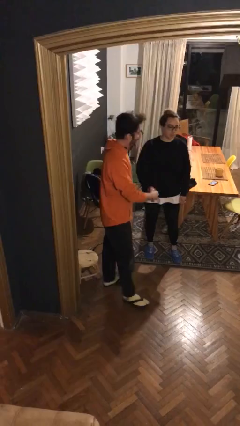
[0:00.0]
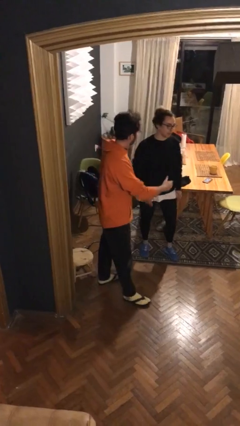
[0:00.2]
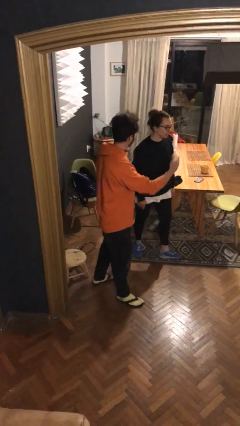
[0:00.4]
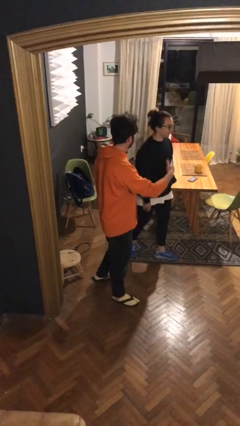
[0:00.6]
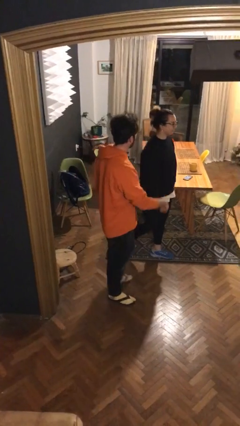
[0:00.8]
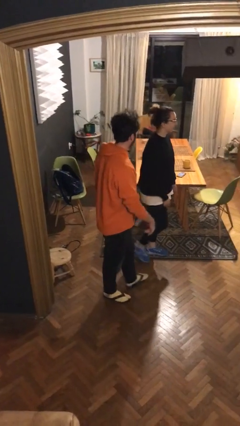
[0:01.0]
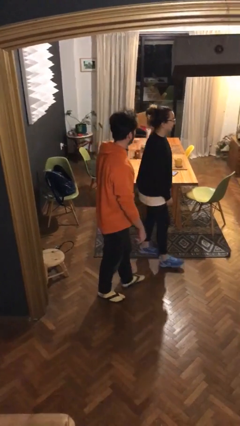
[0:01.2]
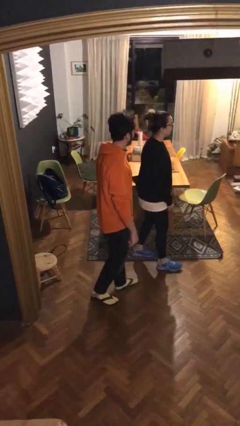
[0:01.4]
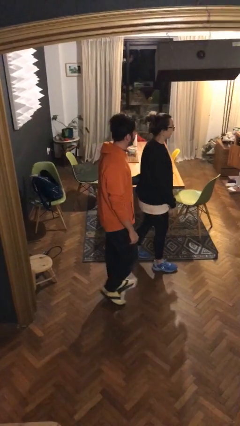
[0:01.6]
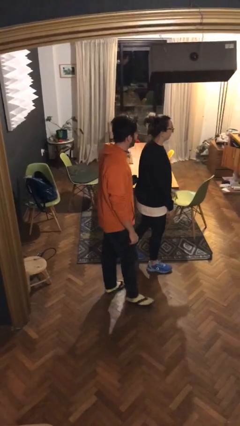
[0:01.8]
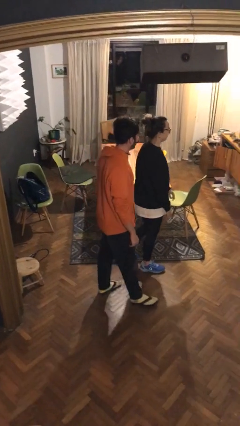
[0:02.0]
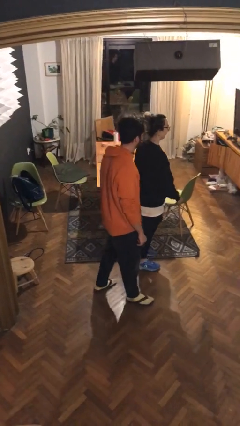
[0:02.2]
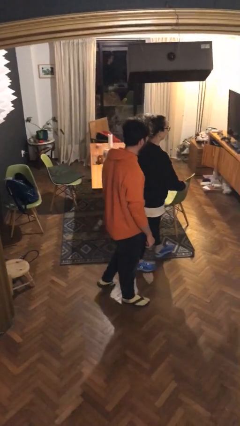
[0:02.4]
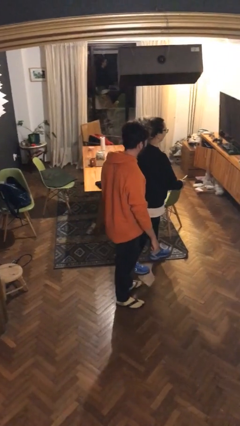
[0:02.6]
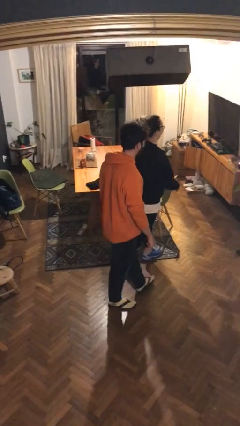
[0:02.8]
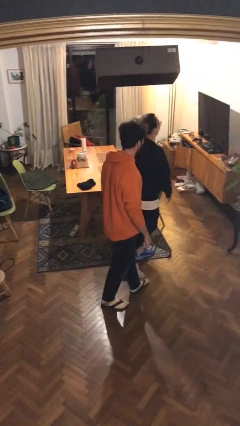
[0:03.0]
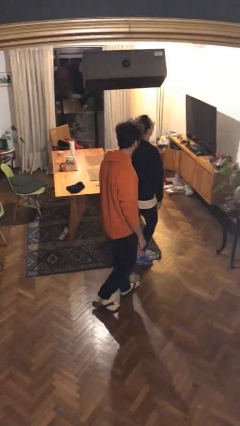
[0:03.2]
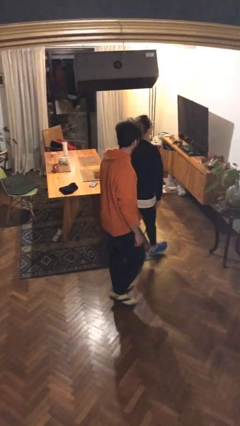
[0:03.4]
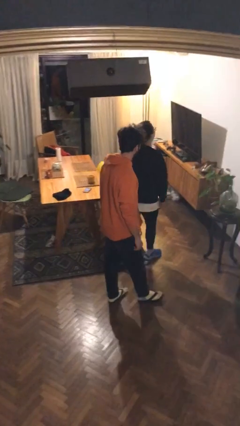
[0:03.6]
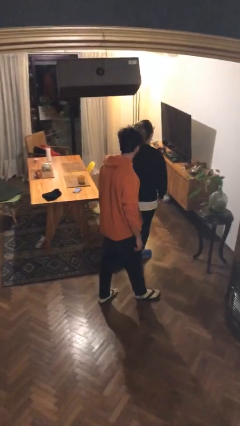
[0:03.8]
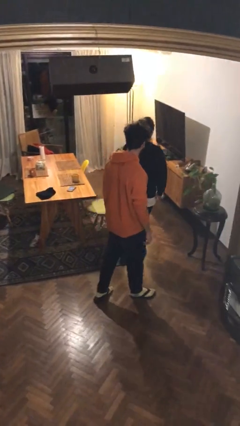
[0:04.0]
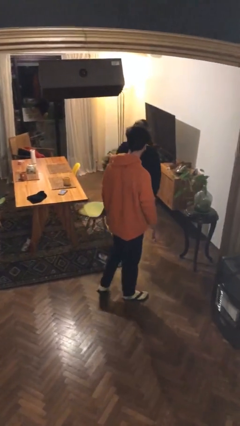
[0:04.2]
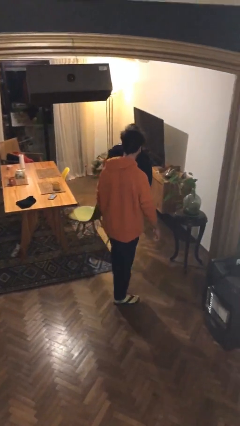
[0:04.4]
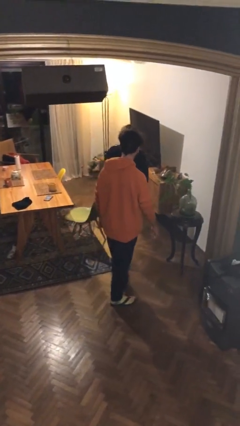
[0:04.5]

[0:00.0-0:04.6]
person talks to person

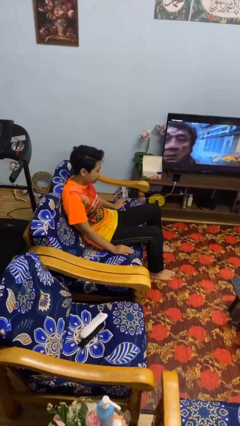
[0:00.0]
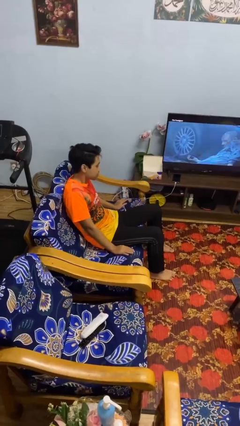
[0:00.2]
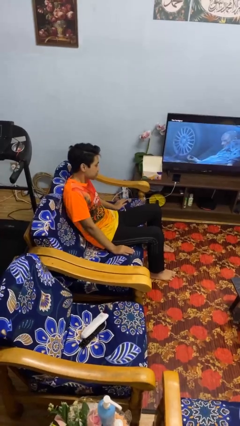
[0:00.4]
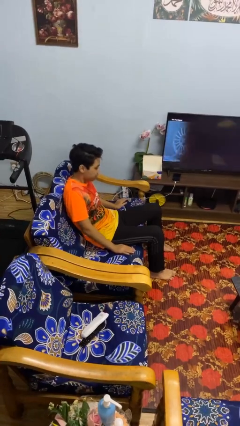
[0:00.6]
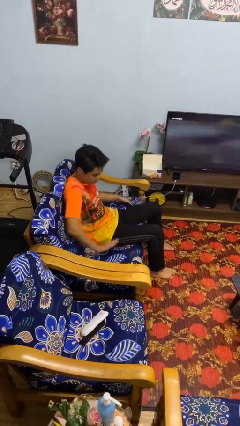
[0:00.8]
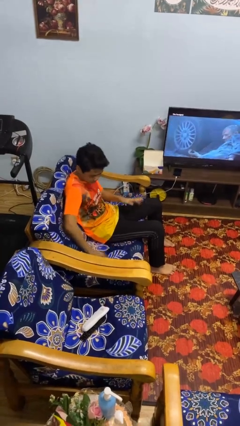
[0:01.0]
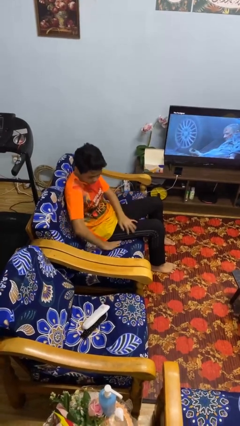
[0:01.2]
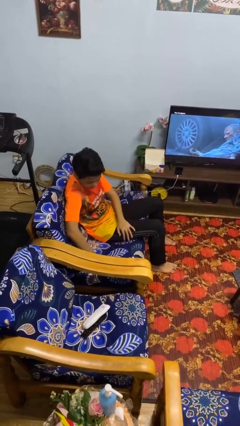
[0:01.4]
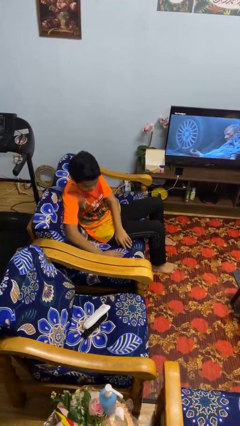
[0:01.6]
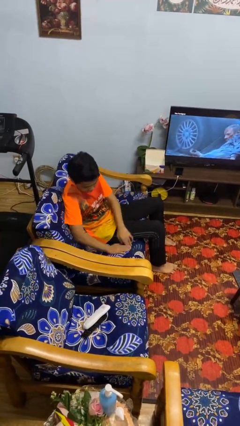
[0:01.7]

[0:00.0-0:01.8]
person searches in couch

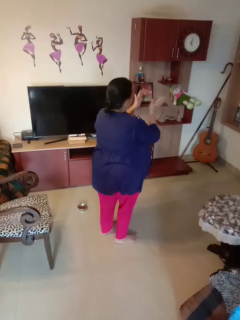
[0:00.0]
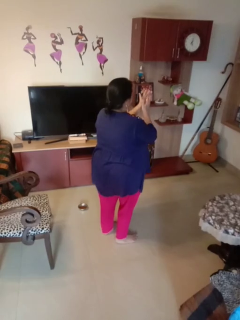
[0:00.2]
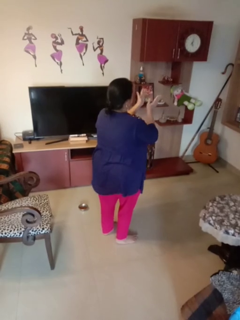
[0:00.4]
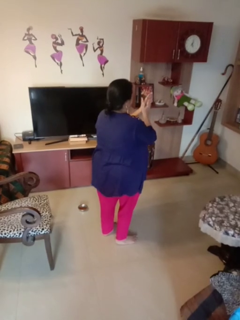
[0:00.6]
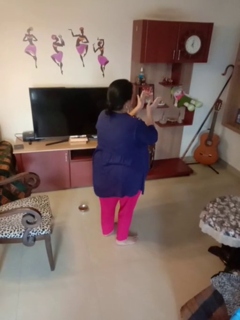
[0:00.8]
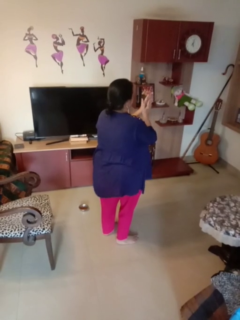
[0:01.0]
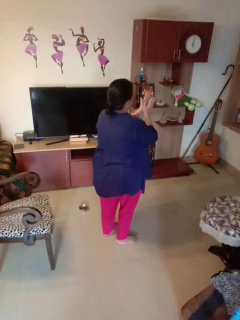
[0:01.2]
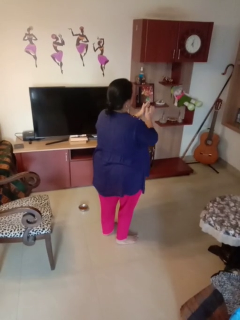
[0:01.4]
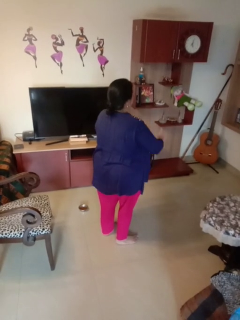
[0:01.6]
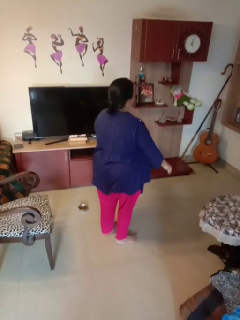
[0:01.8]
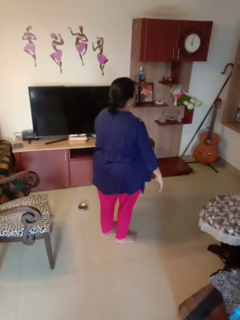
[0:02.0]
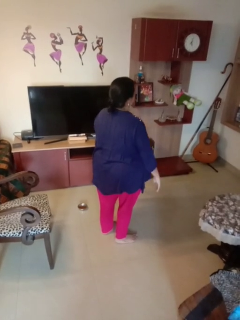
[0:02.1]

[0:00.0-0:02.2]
person claps hands

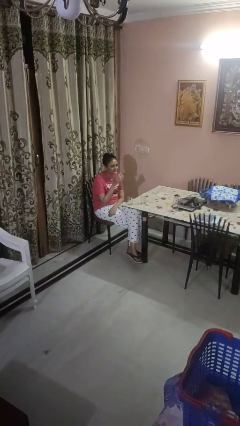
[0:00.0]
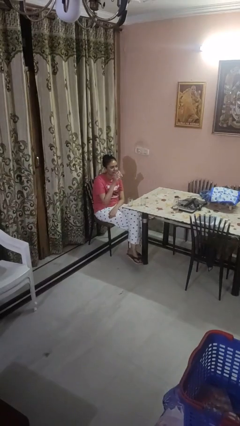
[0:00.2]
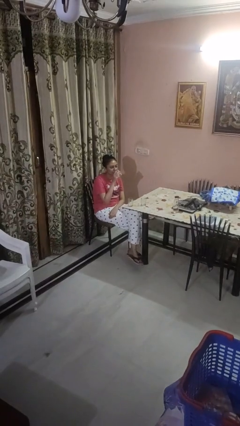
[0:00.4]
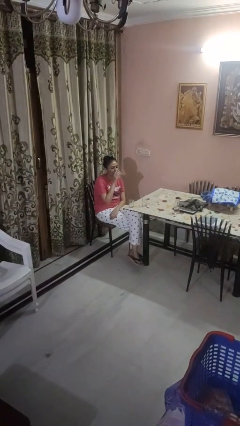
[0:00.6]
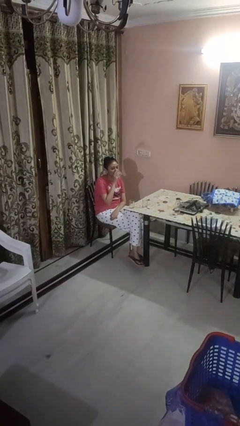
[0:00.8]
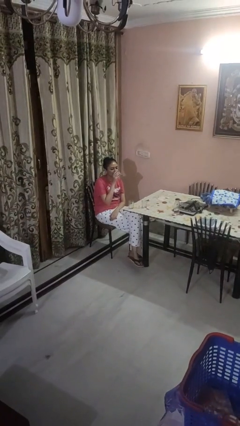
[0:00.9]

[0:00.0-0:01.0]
person drinks from shotglass

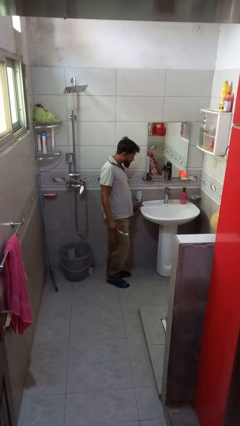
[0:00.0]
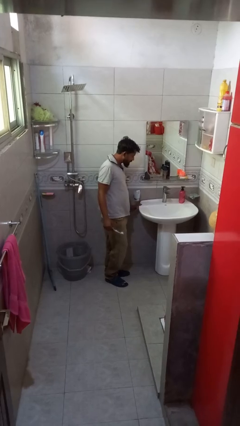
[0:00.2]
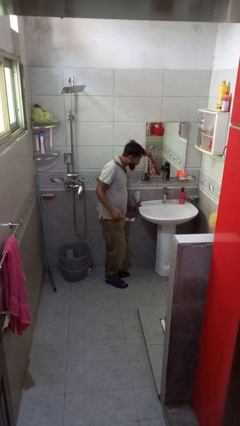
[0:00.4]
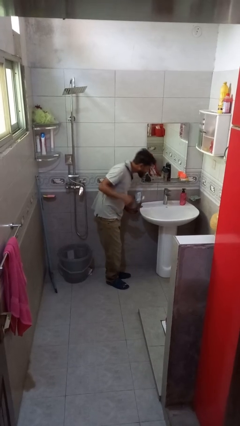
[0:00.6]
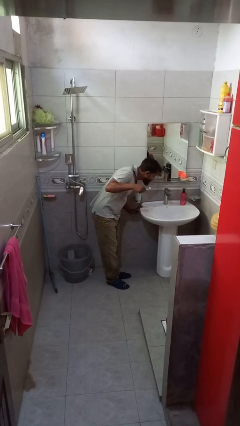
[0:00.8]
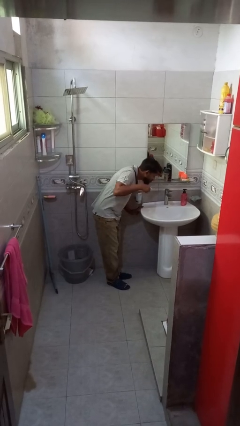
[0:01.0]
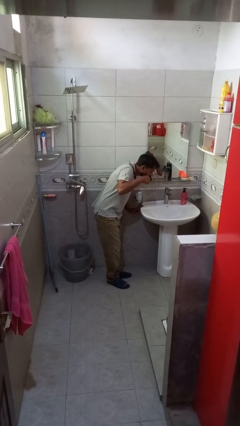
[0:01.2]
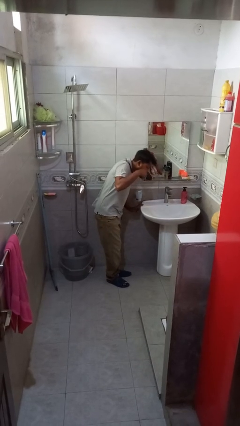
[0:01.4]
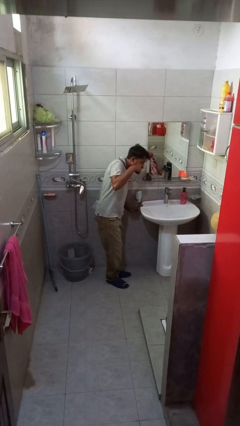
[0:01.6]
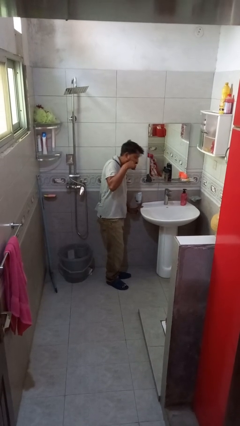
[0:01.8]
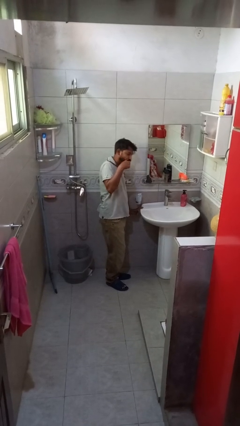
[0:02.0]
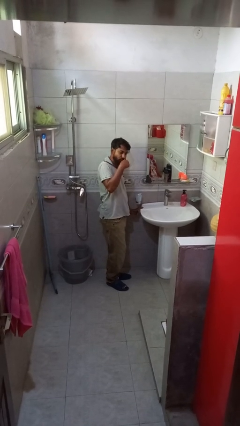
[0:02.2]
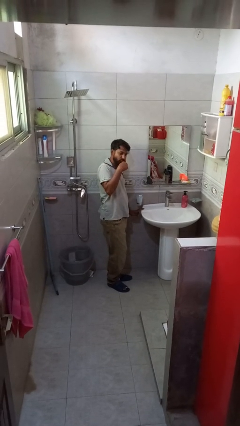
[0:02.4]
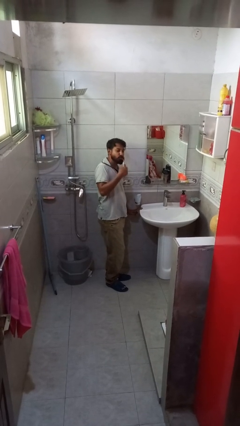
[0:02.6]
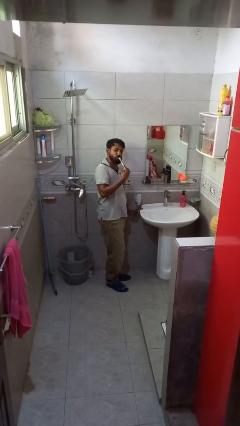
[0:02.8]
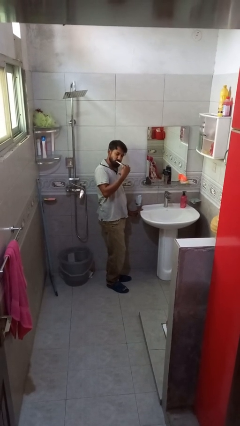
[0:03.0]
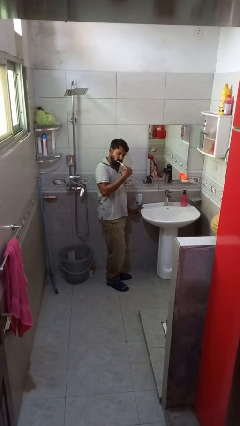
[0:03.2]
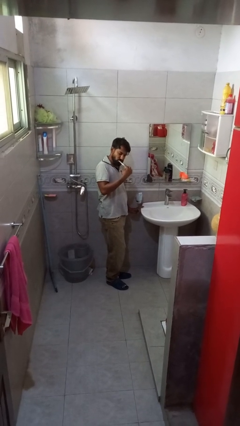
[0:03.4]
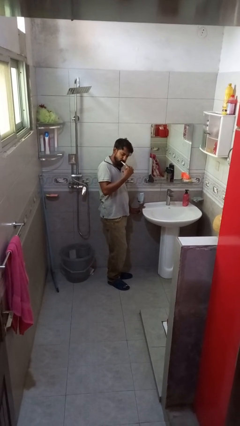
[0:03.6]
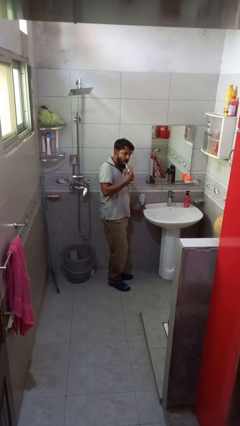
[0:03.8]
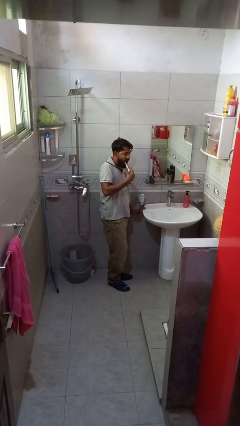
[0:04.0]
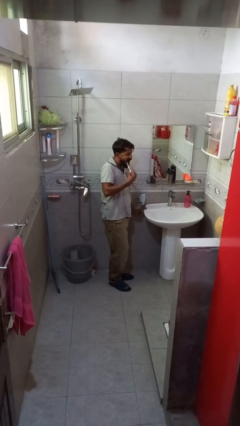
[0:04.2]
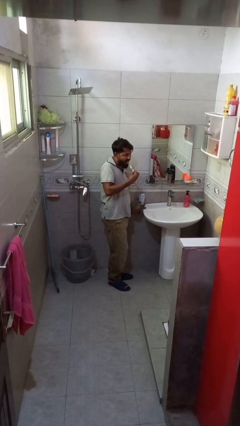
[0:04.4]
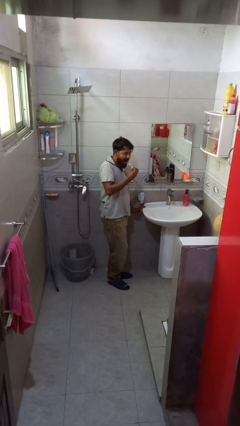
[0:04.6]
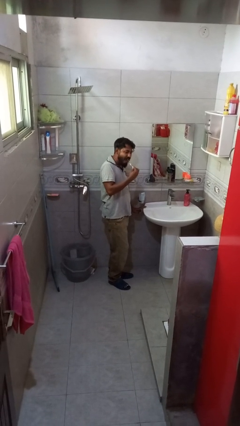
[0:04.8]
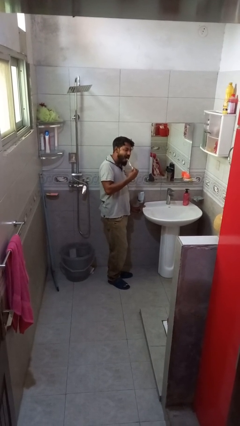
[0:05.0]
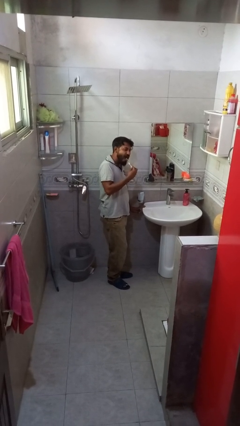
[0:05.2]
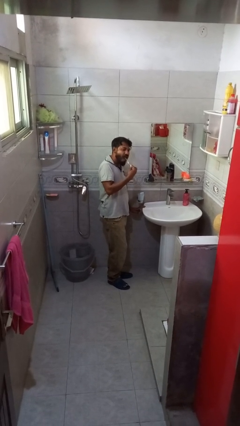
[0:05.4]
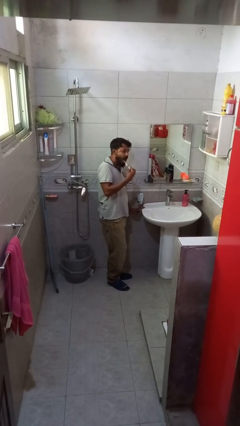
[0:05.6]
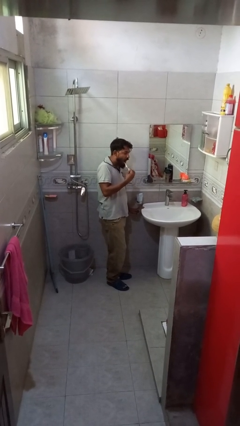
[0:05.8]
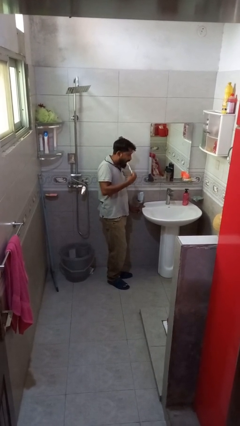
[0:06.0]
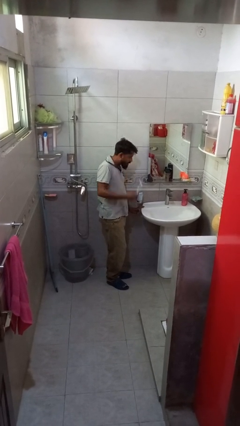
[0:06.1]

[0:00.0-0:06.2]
person brushes teeth

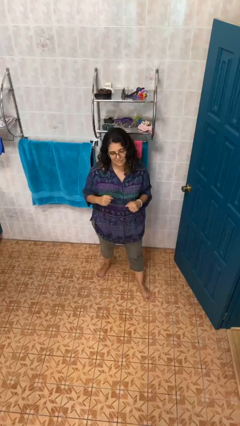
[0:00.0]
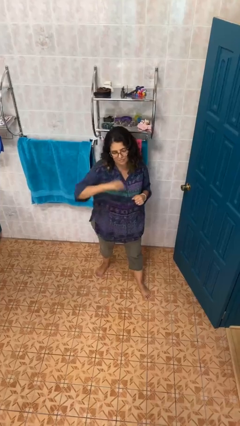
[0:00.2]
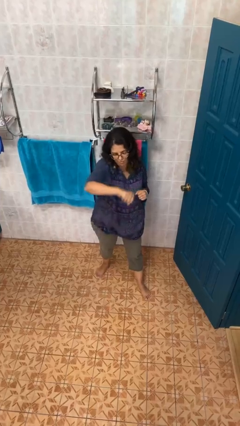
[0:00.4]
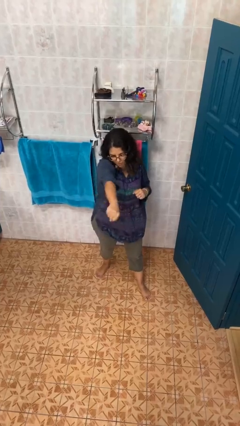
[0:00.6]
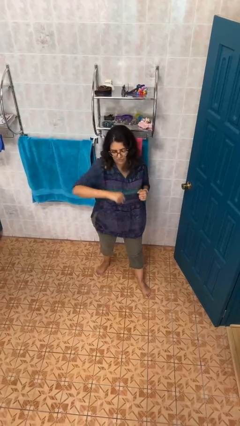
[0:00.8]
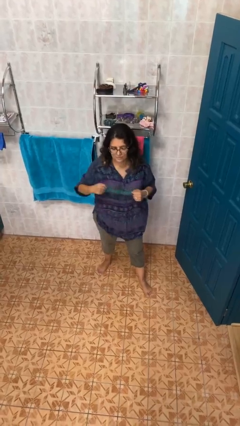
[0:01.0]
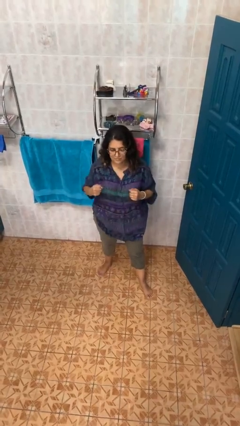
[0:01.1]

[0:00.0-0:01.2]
person punches

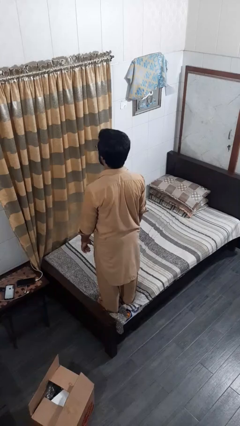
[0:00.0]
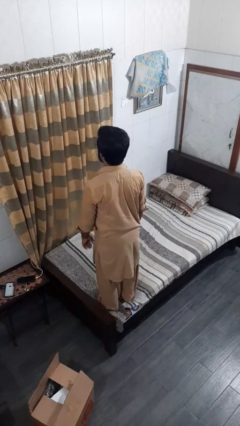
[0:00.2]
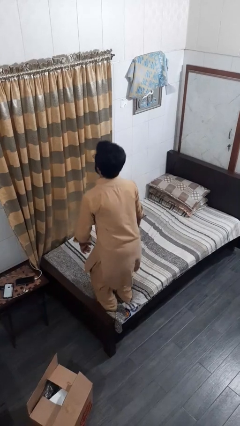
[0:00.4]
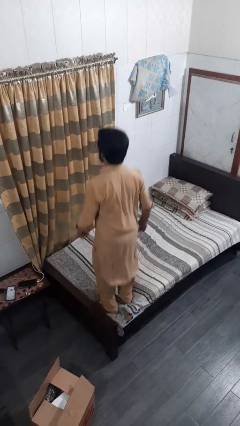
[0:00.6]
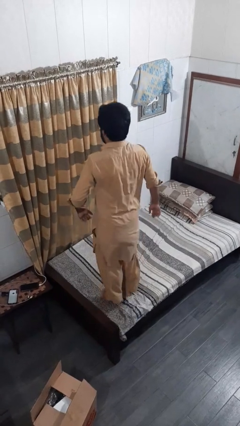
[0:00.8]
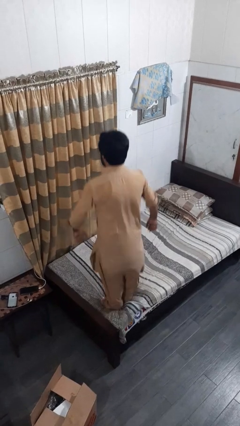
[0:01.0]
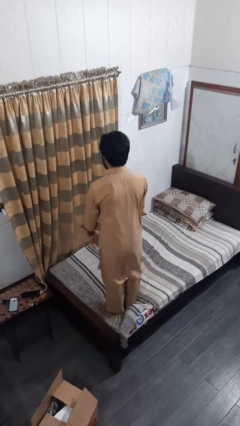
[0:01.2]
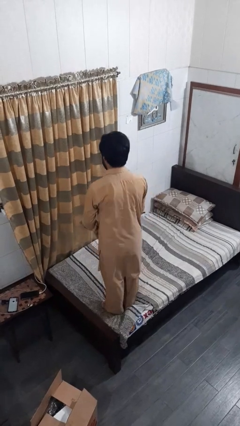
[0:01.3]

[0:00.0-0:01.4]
person jumps on bed
